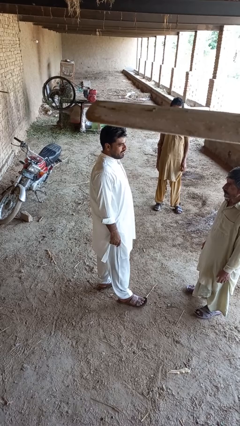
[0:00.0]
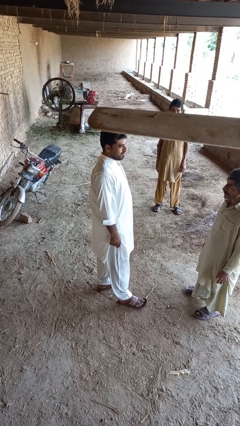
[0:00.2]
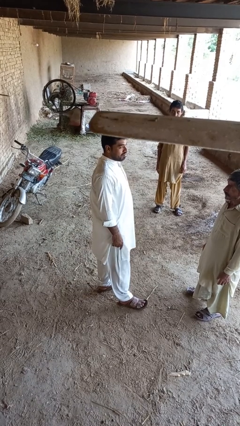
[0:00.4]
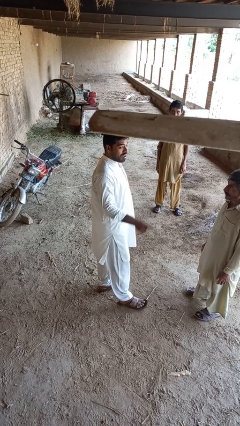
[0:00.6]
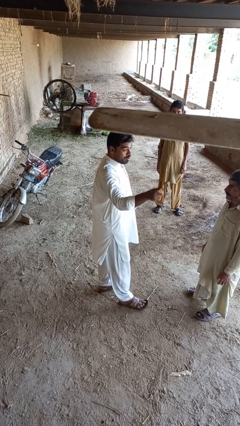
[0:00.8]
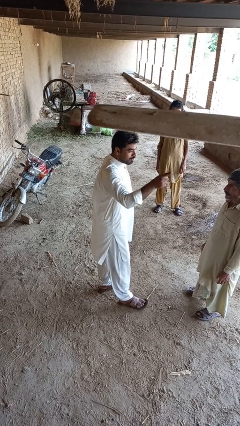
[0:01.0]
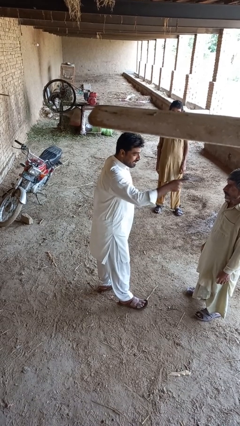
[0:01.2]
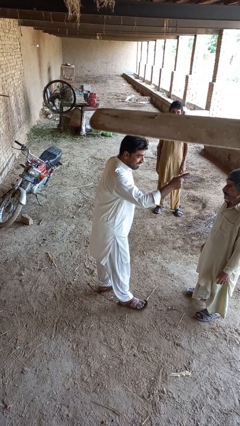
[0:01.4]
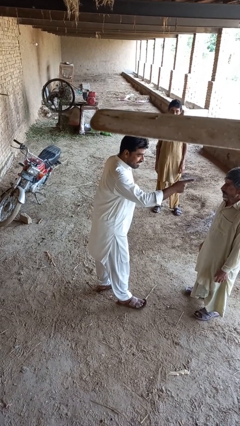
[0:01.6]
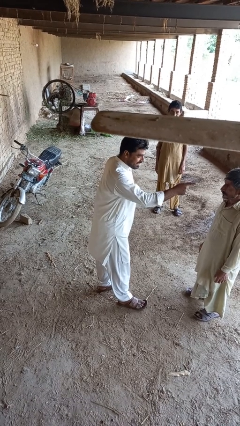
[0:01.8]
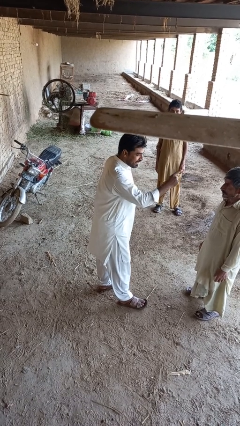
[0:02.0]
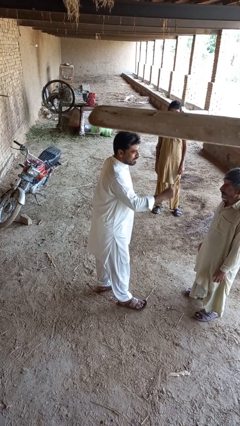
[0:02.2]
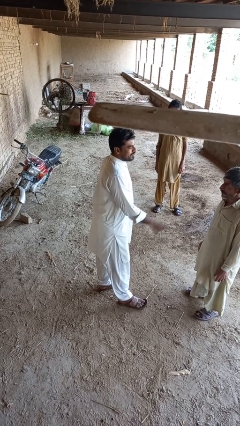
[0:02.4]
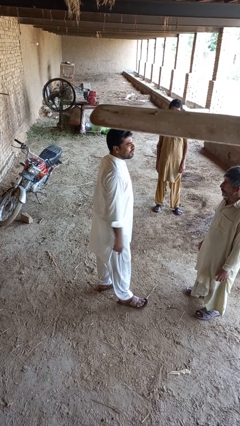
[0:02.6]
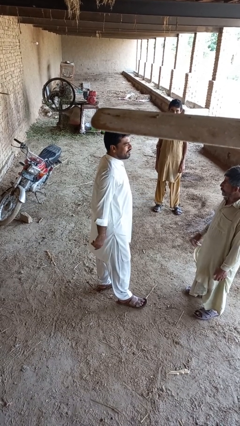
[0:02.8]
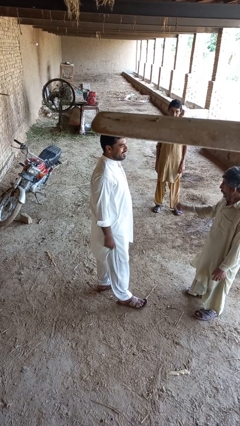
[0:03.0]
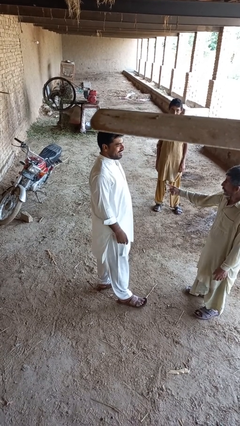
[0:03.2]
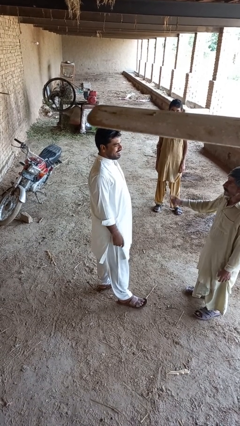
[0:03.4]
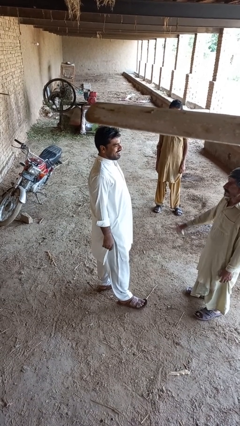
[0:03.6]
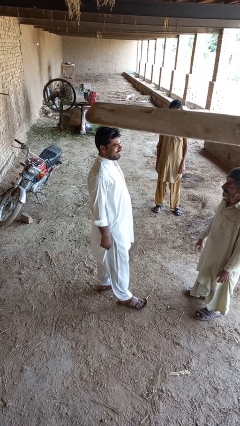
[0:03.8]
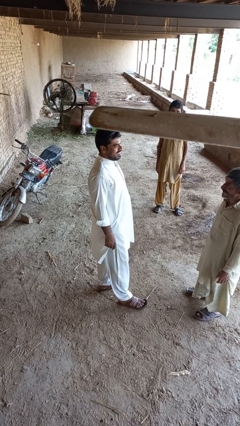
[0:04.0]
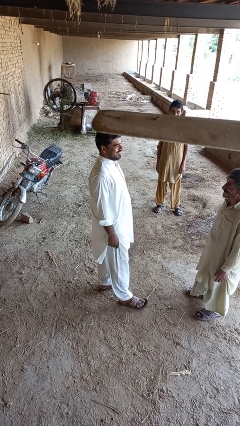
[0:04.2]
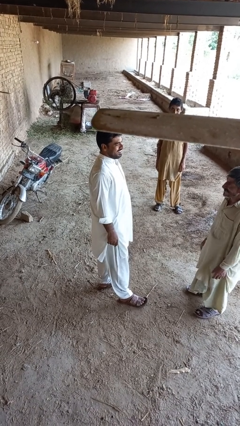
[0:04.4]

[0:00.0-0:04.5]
person points at person

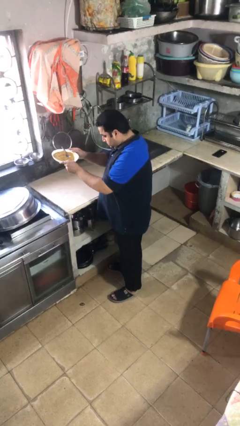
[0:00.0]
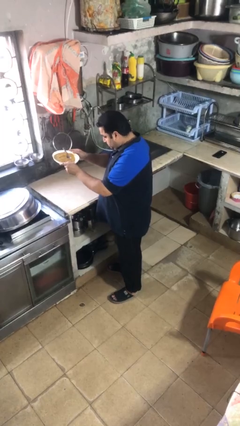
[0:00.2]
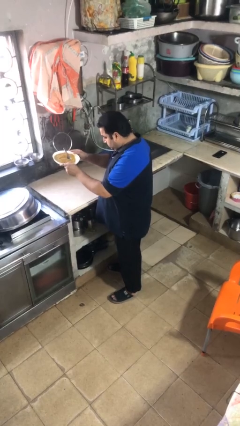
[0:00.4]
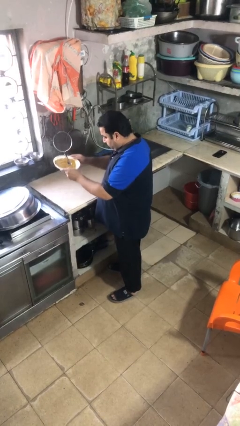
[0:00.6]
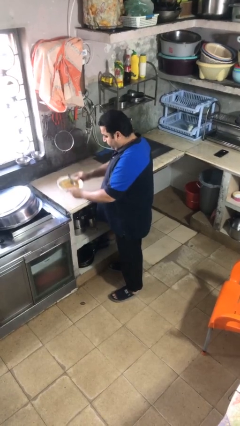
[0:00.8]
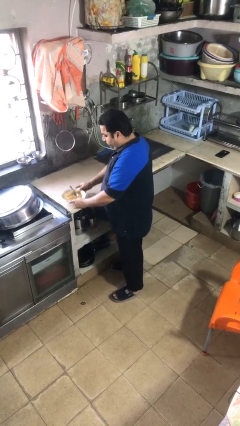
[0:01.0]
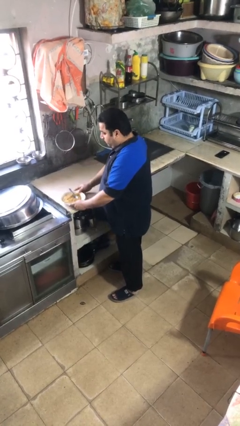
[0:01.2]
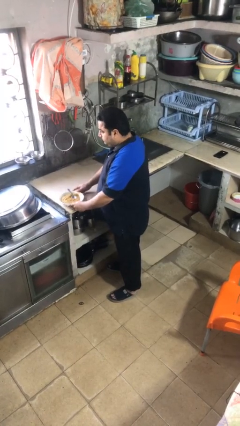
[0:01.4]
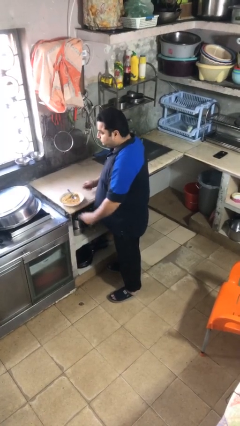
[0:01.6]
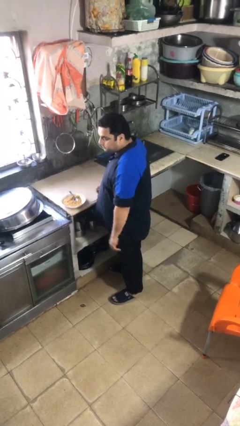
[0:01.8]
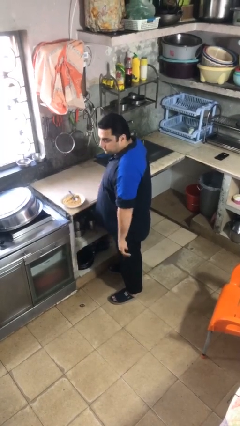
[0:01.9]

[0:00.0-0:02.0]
person puts down object on countertop

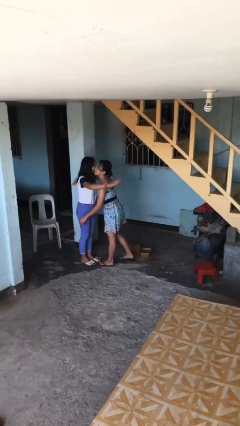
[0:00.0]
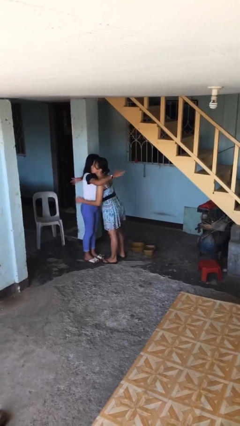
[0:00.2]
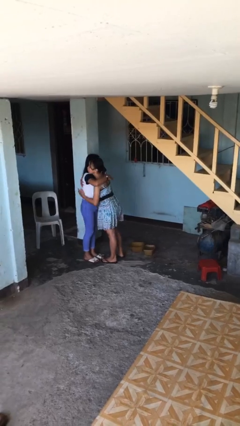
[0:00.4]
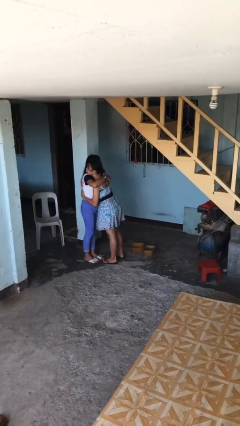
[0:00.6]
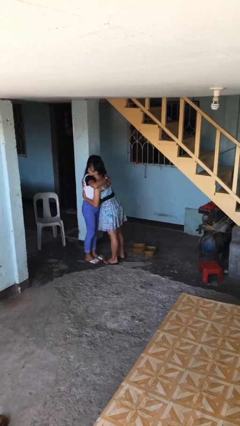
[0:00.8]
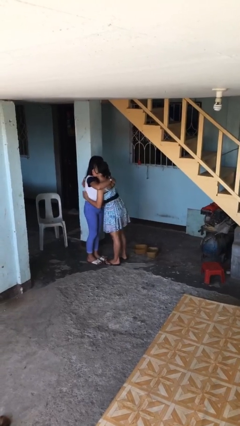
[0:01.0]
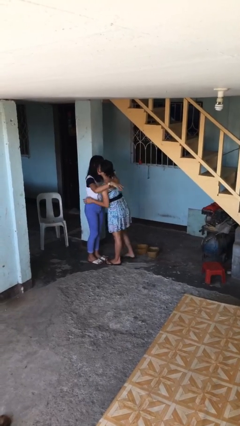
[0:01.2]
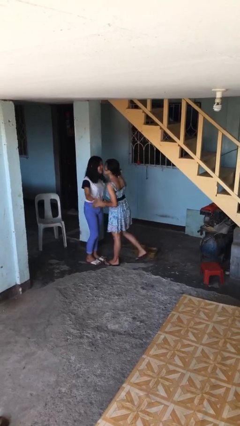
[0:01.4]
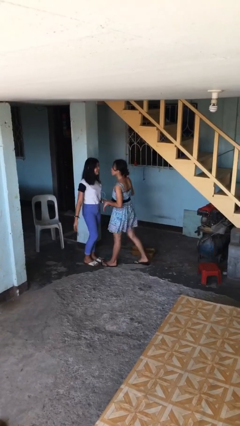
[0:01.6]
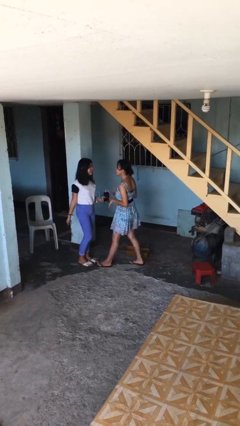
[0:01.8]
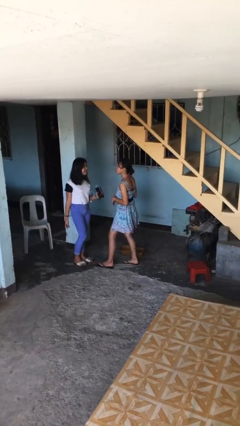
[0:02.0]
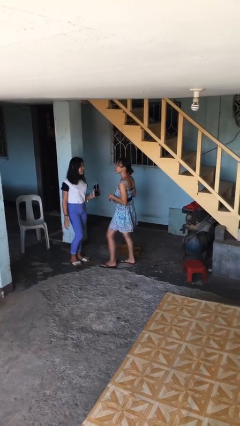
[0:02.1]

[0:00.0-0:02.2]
person embraces person

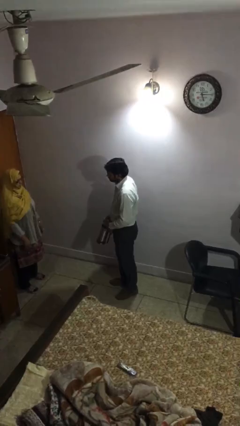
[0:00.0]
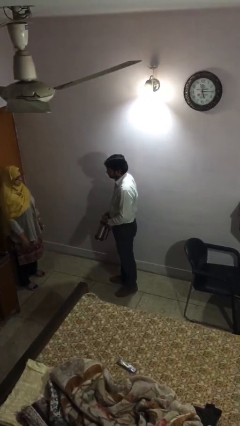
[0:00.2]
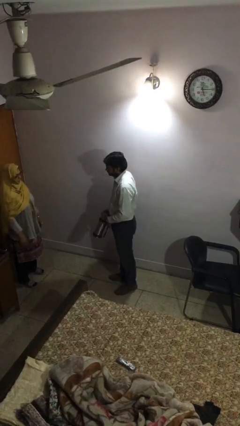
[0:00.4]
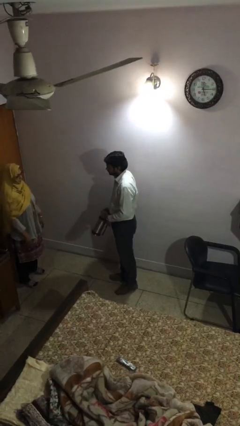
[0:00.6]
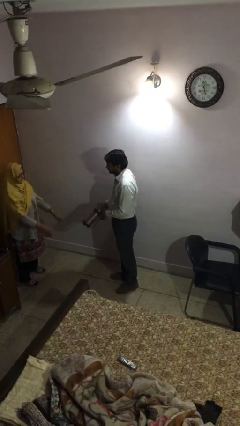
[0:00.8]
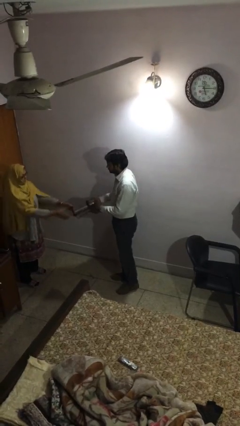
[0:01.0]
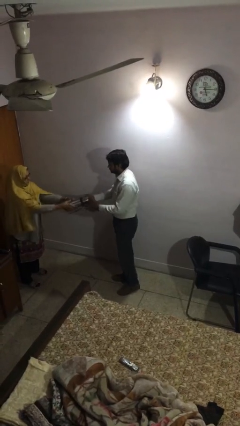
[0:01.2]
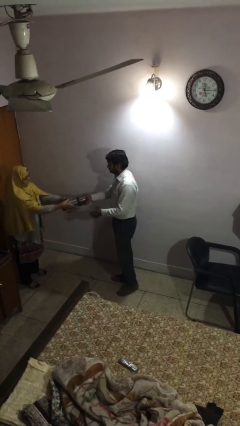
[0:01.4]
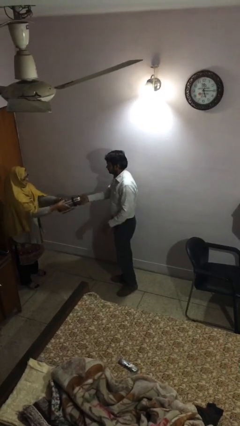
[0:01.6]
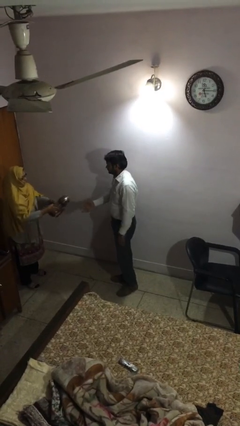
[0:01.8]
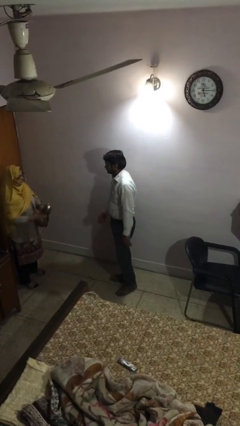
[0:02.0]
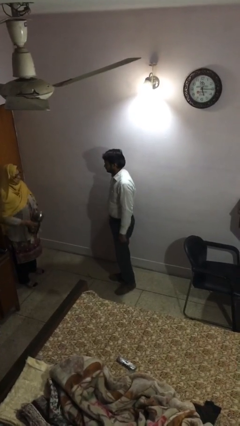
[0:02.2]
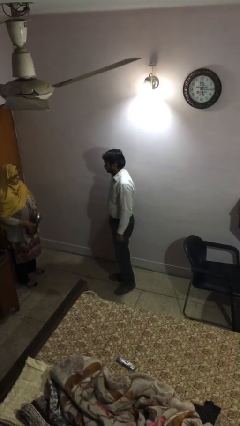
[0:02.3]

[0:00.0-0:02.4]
person transfers object to person

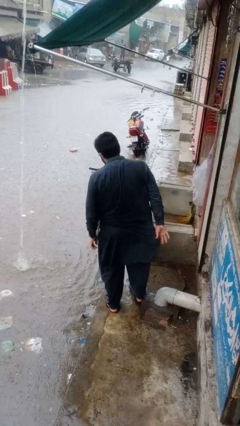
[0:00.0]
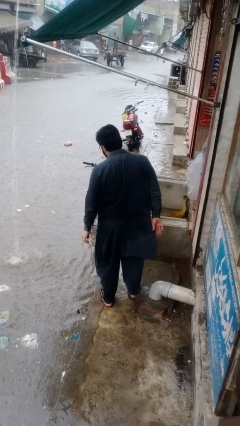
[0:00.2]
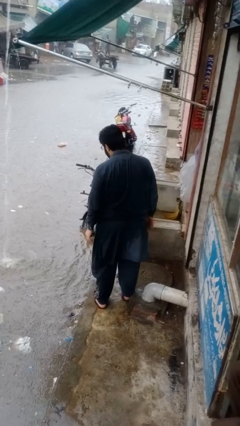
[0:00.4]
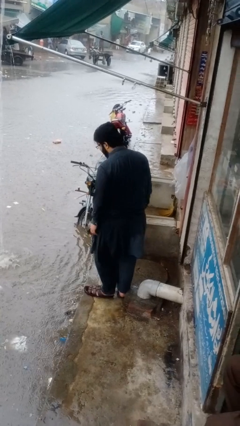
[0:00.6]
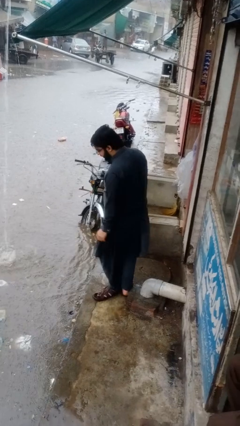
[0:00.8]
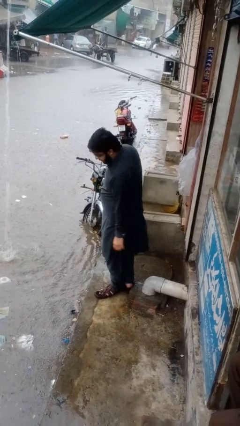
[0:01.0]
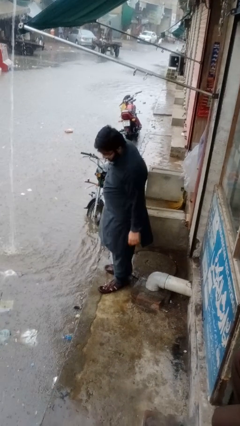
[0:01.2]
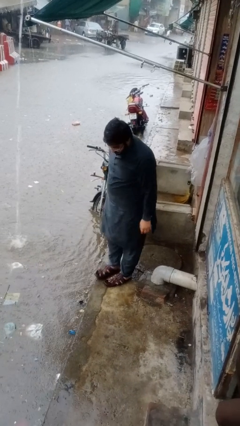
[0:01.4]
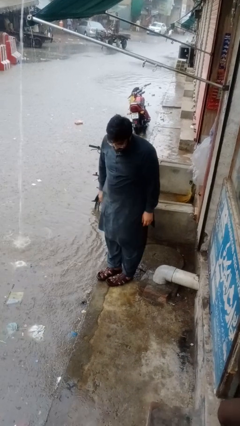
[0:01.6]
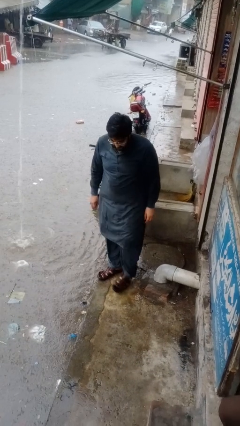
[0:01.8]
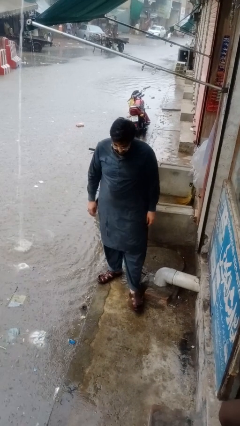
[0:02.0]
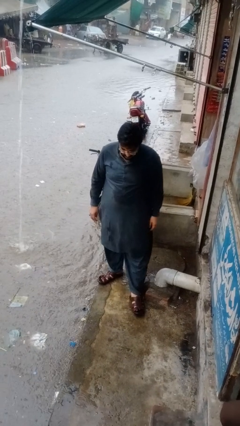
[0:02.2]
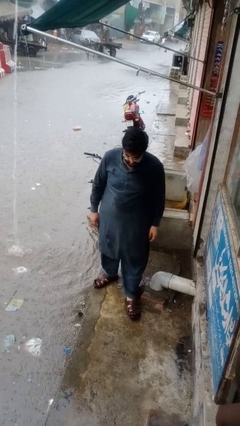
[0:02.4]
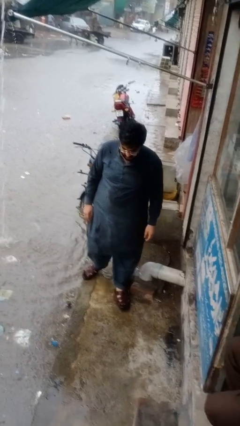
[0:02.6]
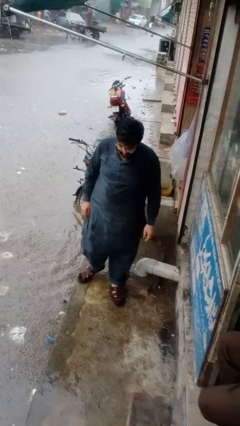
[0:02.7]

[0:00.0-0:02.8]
person trips on object on floor

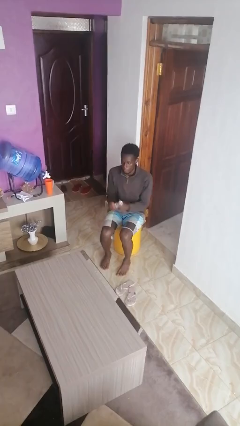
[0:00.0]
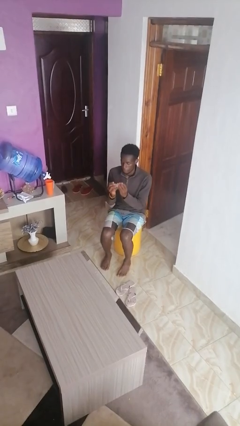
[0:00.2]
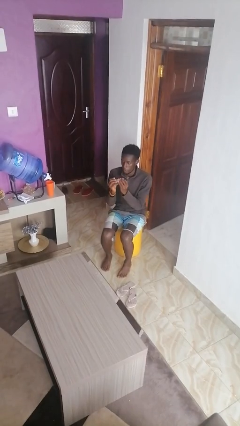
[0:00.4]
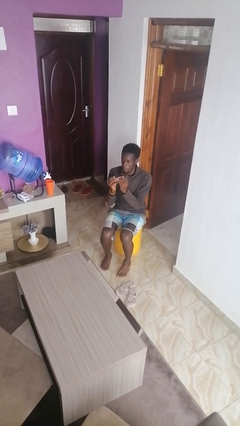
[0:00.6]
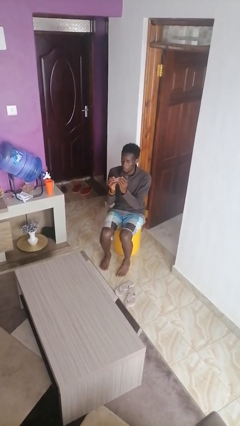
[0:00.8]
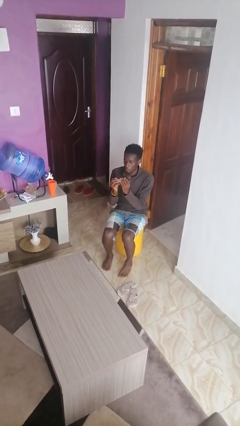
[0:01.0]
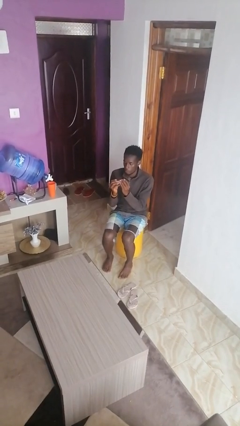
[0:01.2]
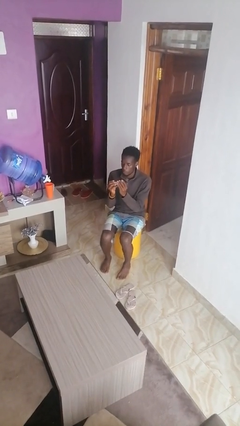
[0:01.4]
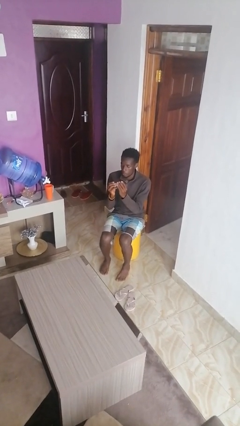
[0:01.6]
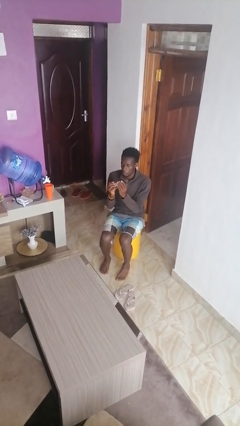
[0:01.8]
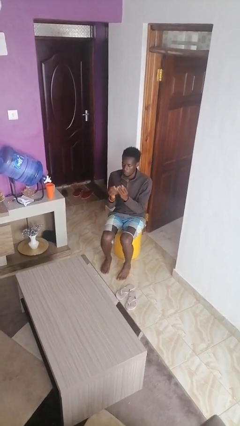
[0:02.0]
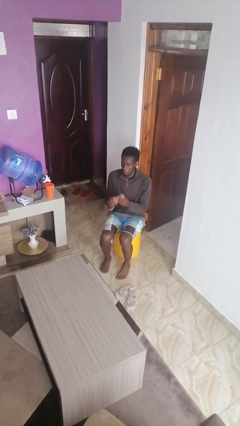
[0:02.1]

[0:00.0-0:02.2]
person clips fingernails

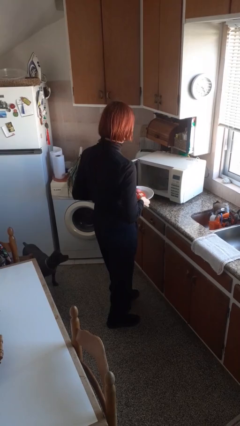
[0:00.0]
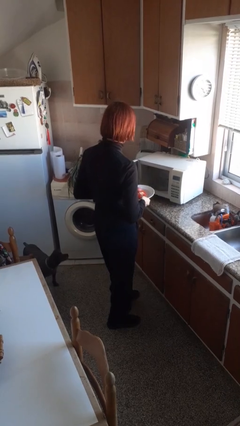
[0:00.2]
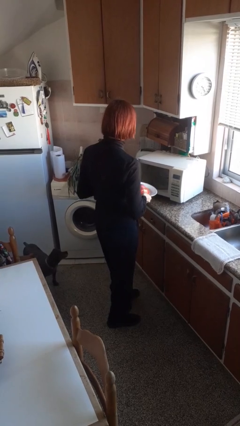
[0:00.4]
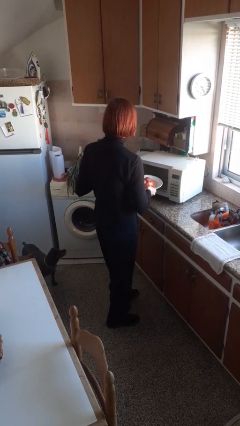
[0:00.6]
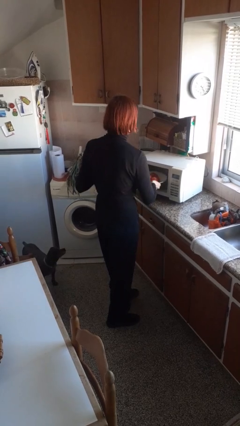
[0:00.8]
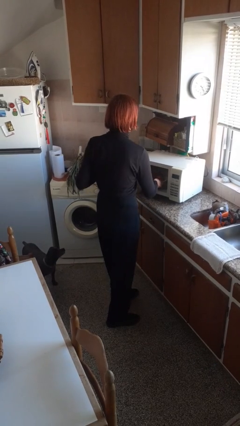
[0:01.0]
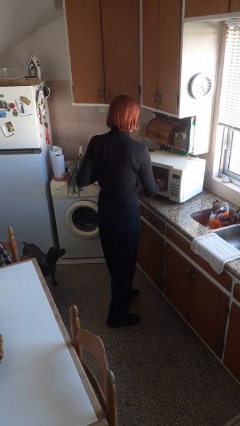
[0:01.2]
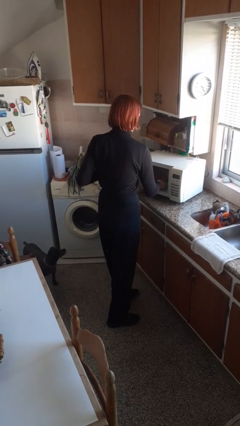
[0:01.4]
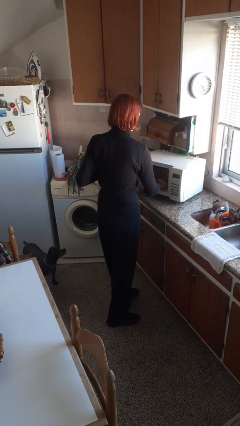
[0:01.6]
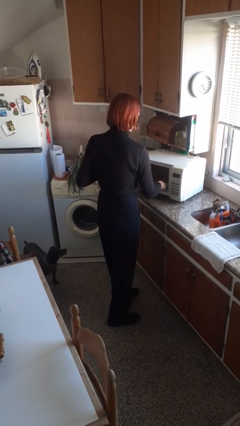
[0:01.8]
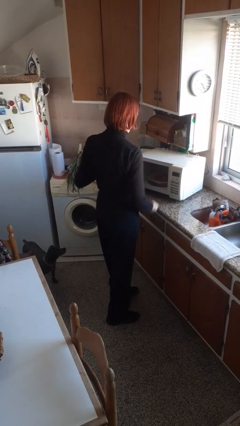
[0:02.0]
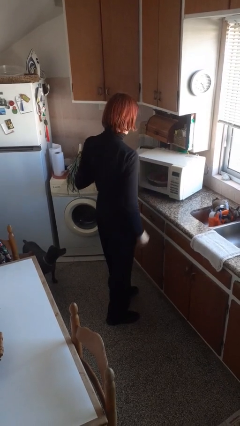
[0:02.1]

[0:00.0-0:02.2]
person puts object into microwave
